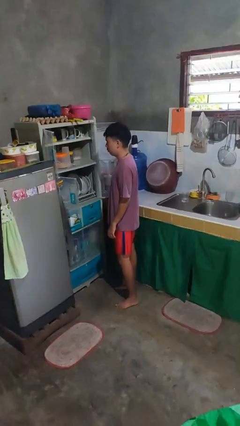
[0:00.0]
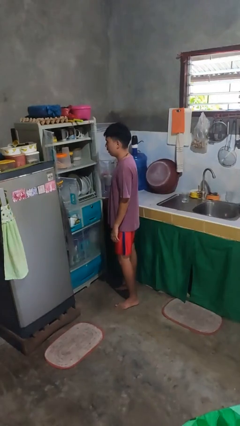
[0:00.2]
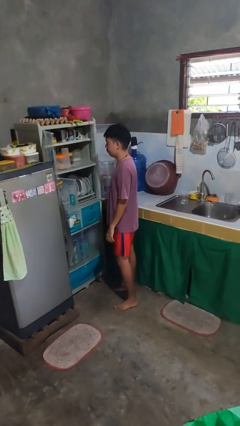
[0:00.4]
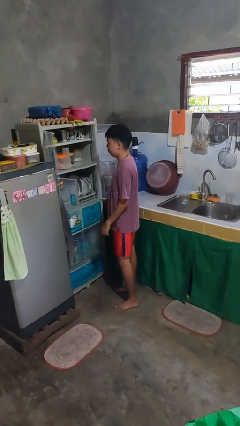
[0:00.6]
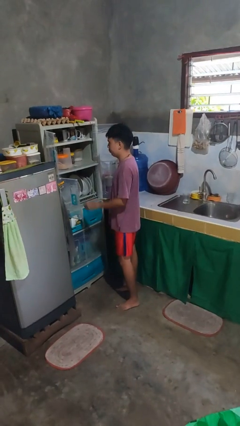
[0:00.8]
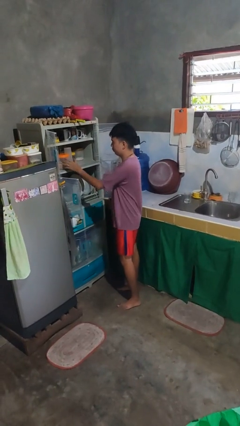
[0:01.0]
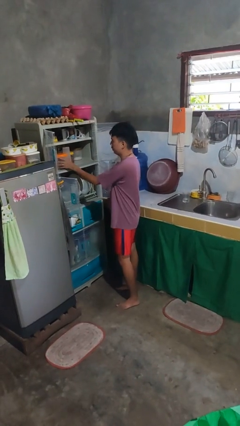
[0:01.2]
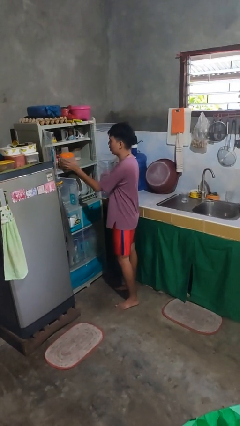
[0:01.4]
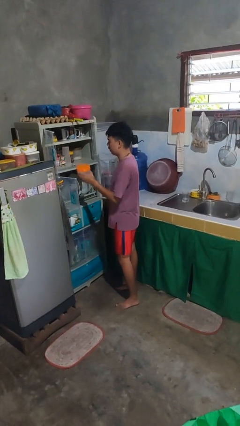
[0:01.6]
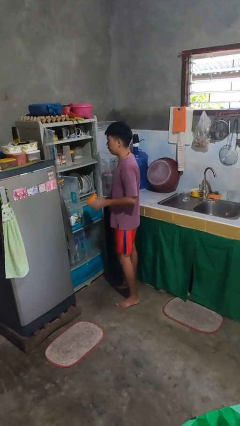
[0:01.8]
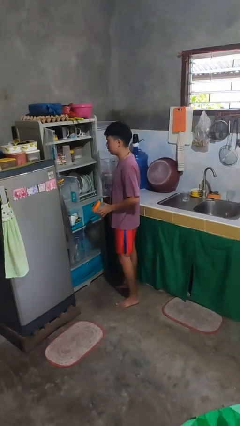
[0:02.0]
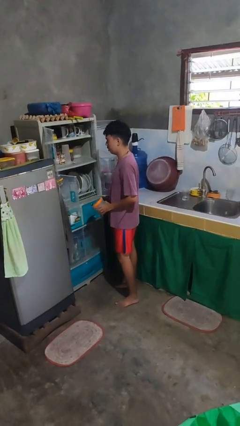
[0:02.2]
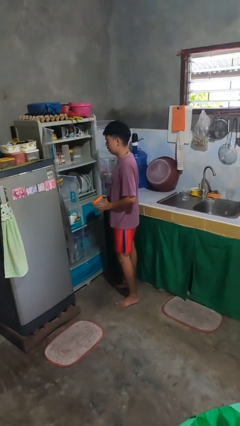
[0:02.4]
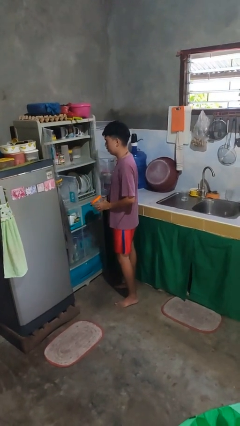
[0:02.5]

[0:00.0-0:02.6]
person takes object from cabinet

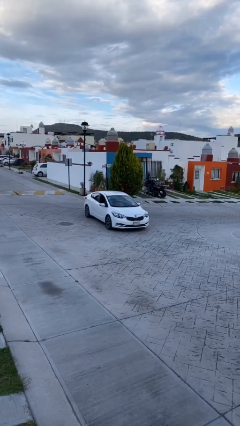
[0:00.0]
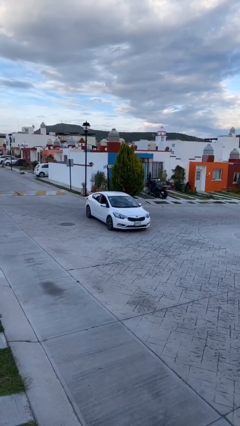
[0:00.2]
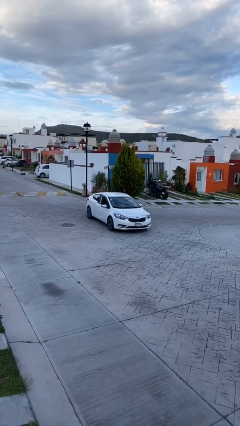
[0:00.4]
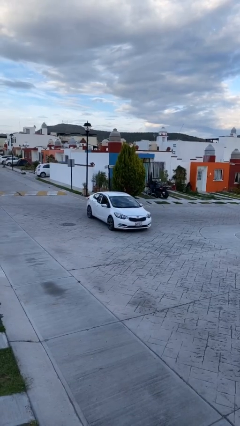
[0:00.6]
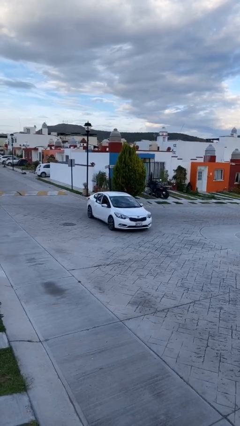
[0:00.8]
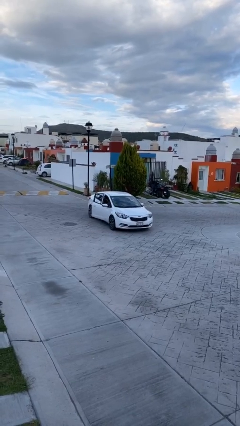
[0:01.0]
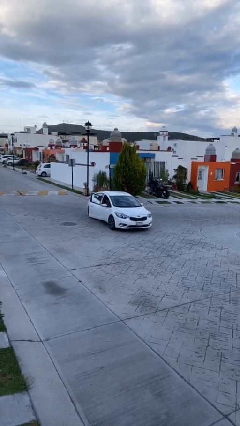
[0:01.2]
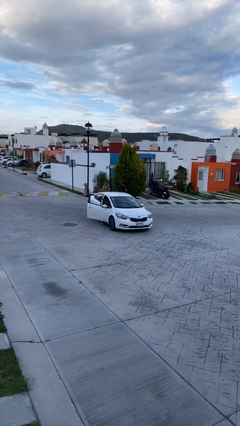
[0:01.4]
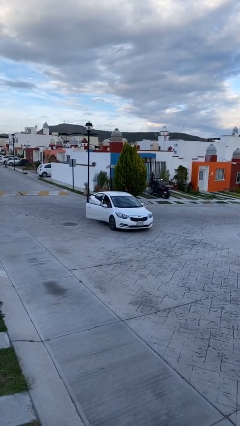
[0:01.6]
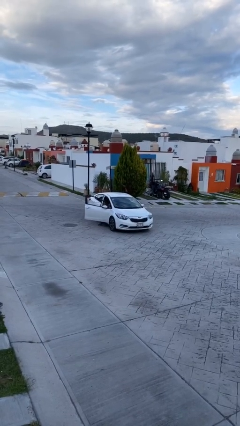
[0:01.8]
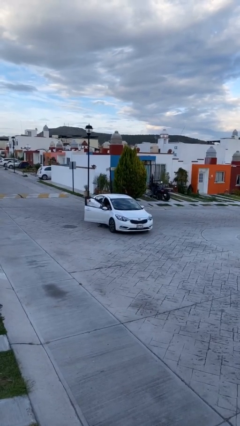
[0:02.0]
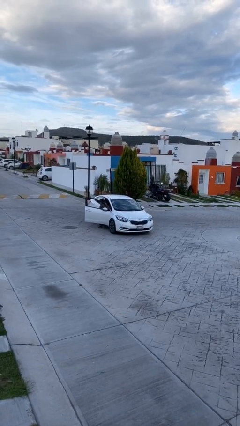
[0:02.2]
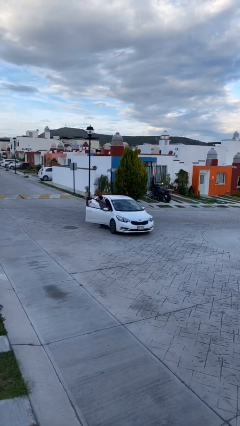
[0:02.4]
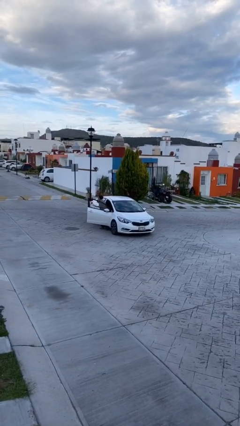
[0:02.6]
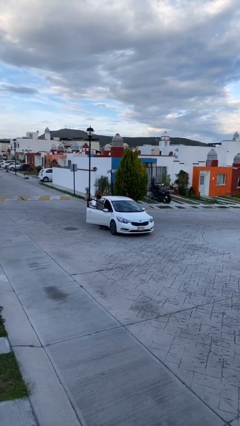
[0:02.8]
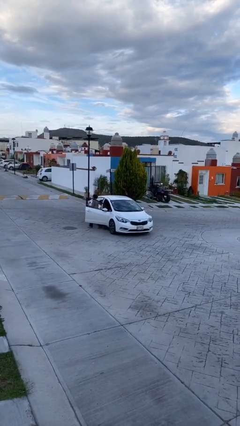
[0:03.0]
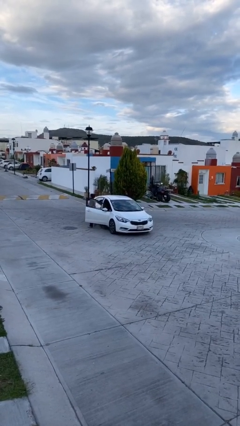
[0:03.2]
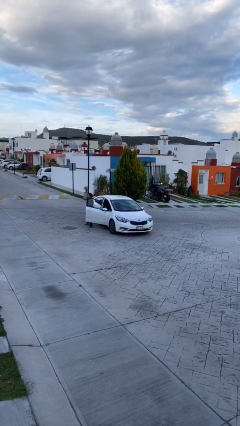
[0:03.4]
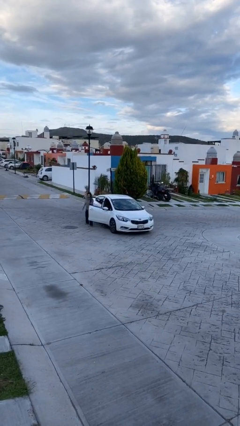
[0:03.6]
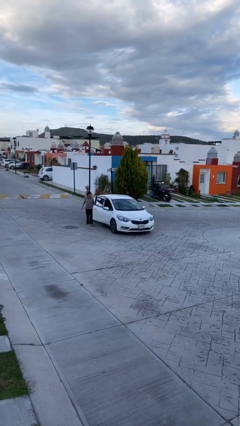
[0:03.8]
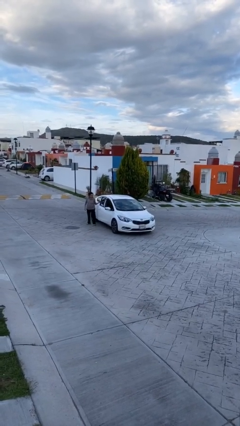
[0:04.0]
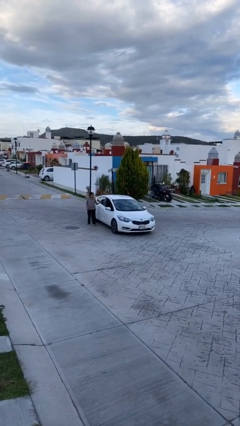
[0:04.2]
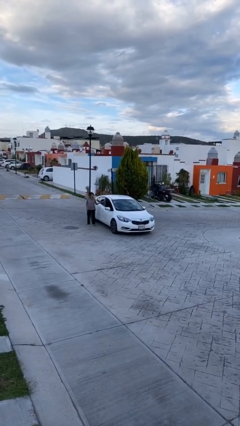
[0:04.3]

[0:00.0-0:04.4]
car drops off person

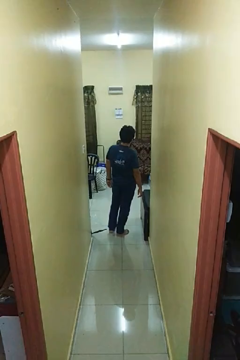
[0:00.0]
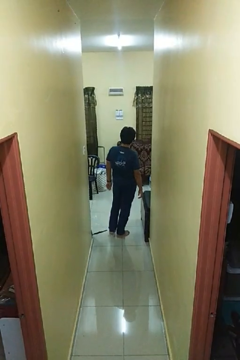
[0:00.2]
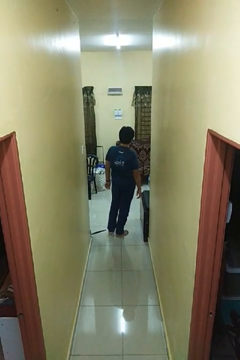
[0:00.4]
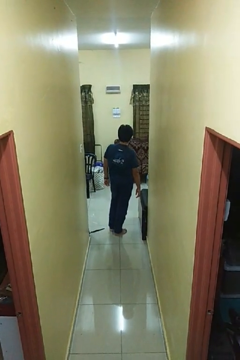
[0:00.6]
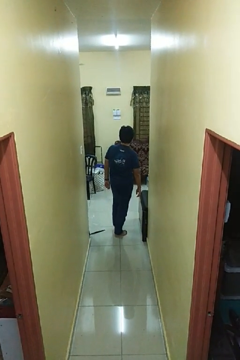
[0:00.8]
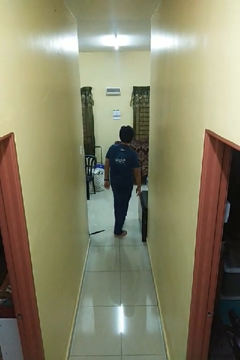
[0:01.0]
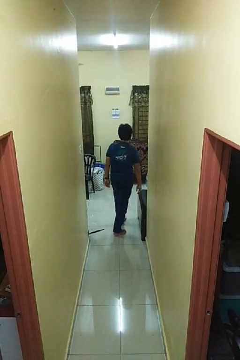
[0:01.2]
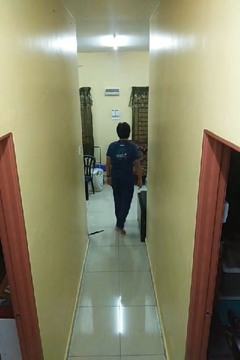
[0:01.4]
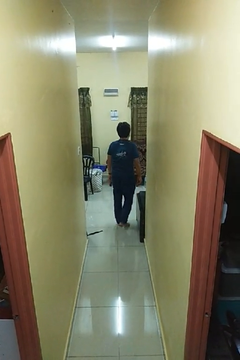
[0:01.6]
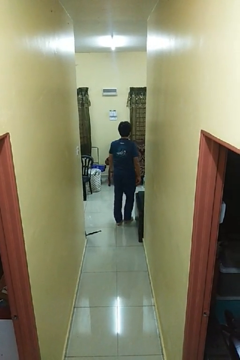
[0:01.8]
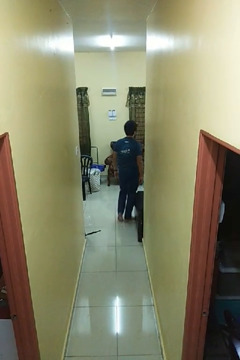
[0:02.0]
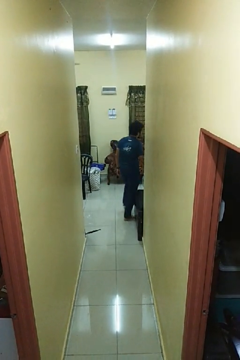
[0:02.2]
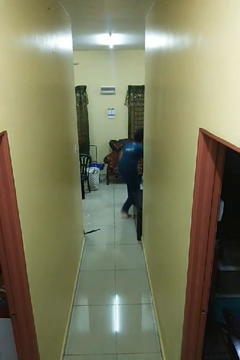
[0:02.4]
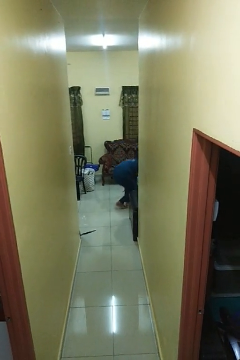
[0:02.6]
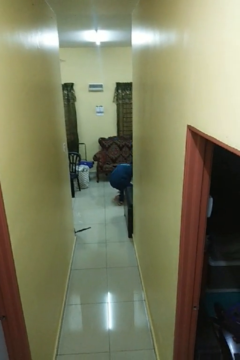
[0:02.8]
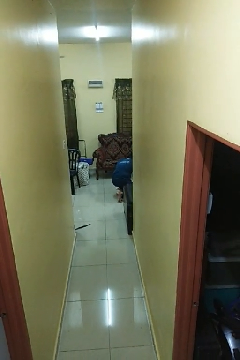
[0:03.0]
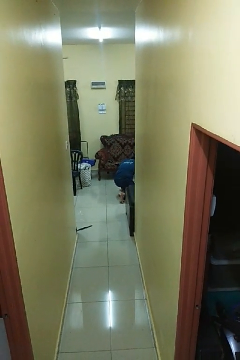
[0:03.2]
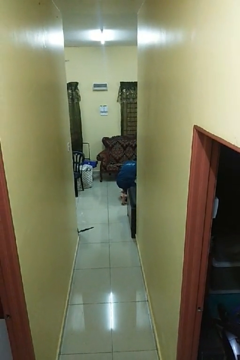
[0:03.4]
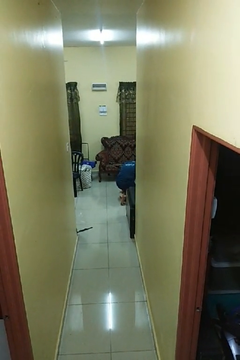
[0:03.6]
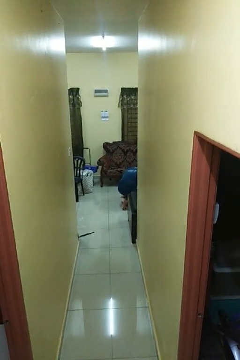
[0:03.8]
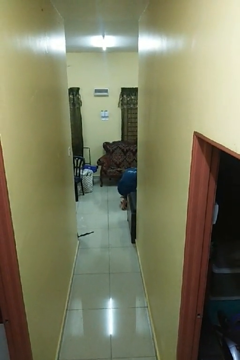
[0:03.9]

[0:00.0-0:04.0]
person trips on object on floor

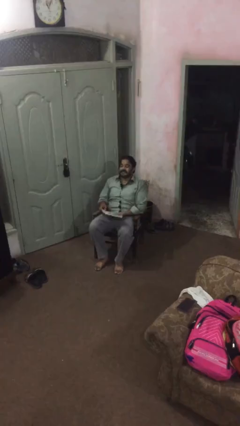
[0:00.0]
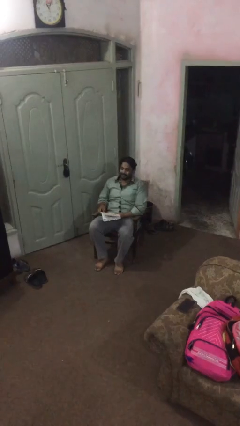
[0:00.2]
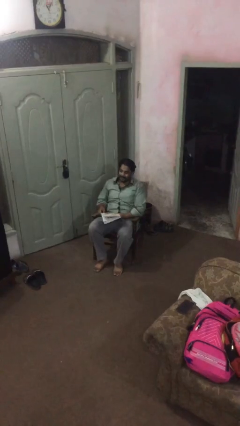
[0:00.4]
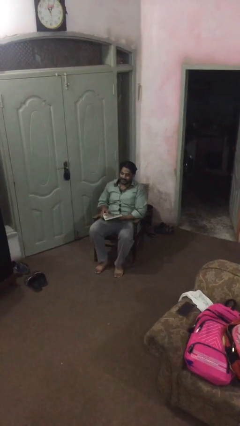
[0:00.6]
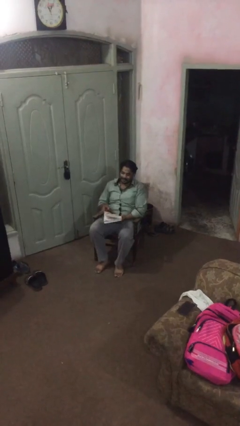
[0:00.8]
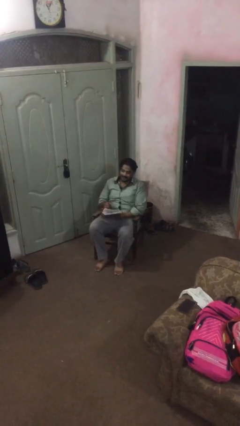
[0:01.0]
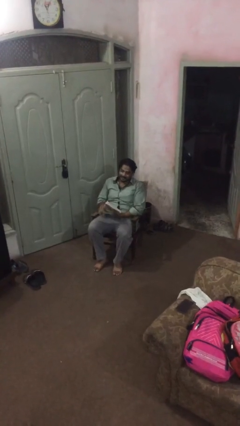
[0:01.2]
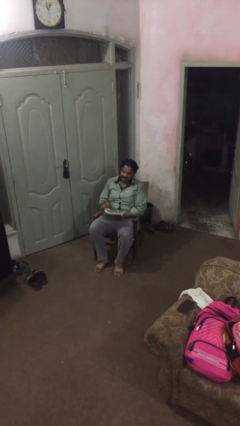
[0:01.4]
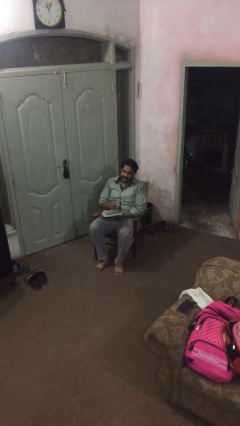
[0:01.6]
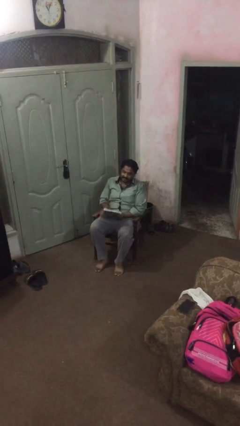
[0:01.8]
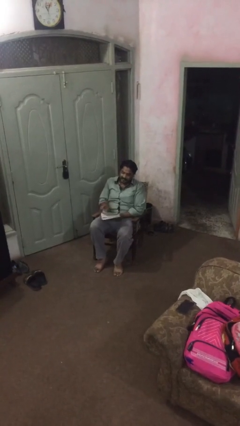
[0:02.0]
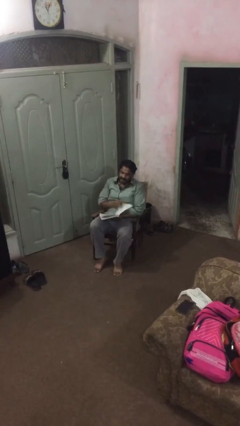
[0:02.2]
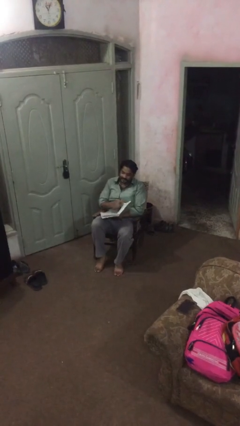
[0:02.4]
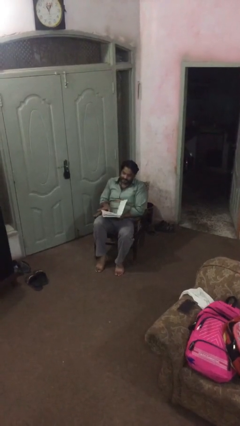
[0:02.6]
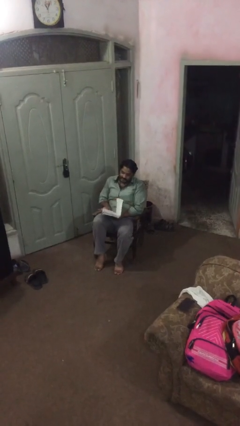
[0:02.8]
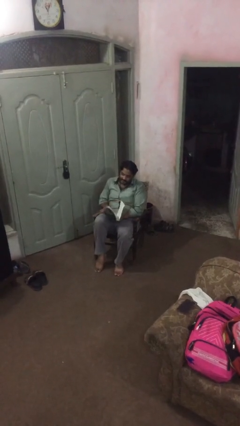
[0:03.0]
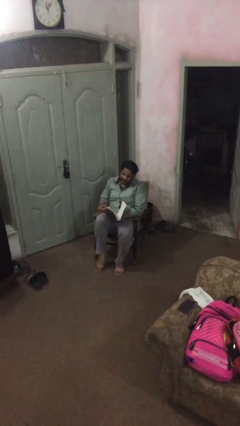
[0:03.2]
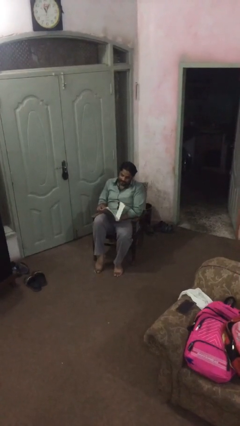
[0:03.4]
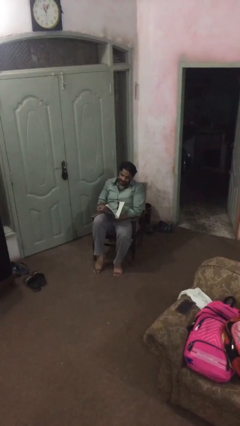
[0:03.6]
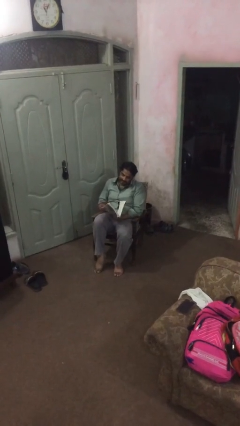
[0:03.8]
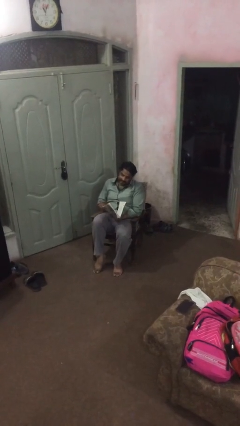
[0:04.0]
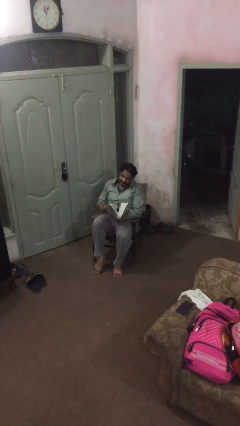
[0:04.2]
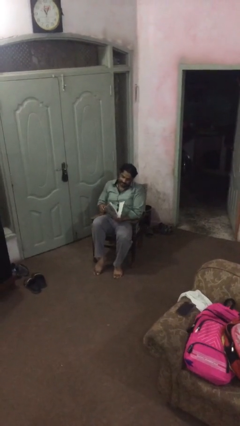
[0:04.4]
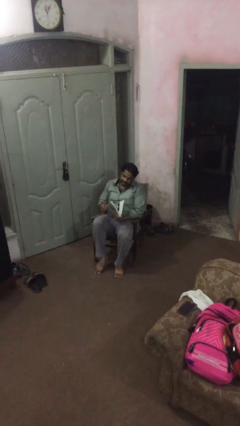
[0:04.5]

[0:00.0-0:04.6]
person reads document

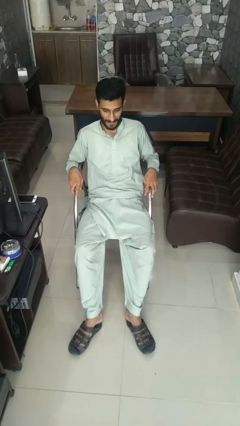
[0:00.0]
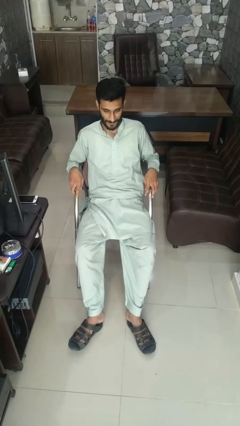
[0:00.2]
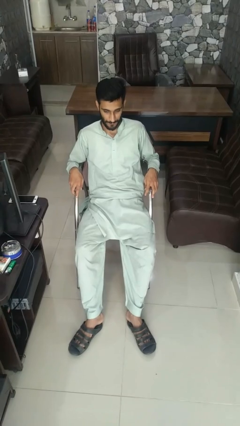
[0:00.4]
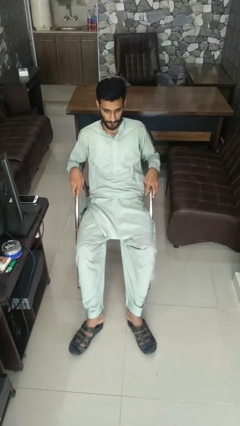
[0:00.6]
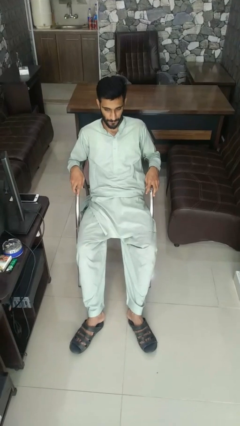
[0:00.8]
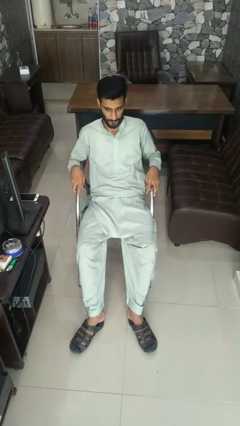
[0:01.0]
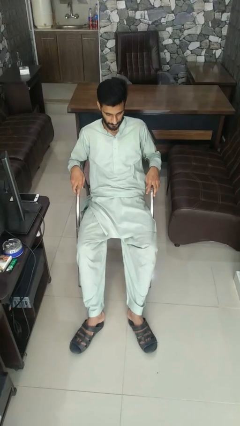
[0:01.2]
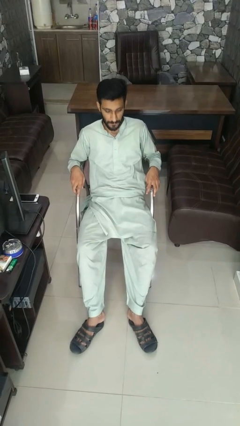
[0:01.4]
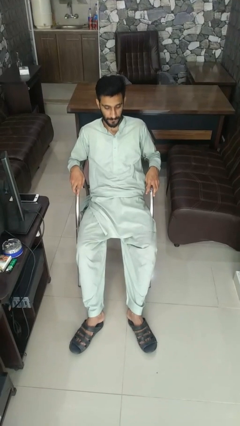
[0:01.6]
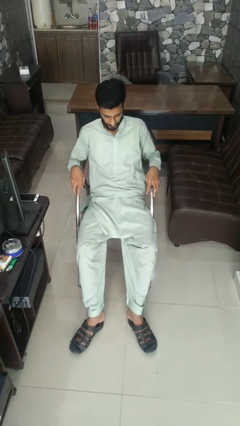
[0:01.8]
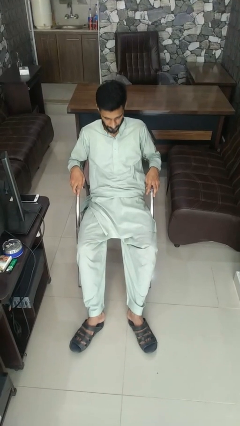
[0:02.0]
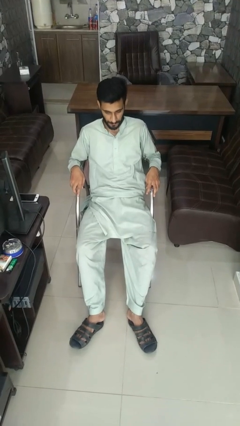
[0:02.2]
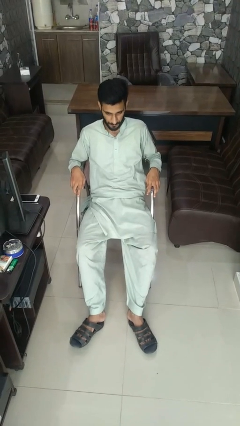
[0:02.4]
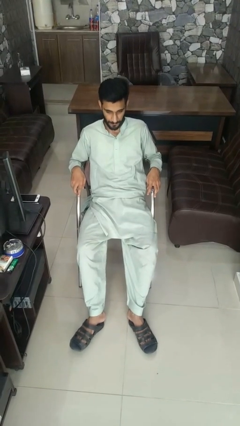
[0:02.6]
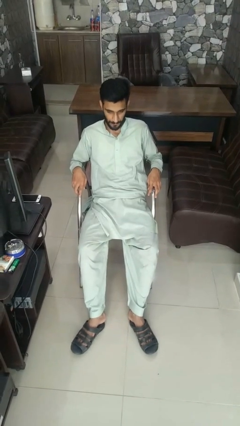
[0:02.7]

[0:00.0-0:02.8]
person nods head
